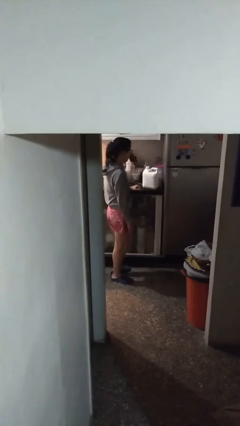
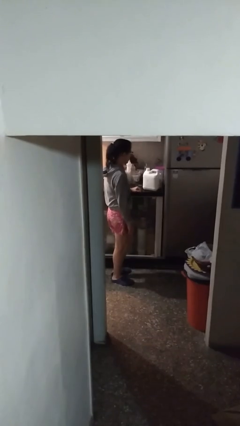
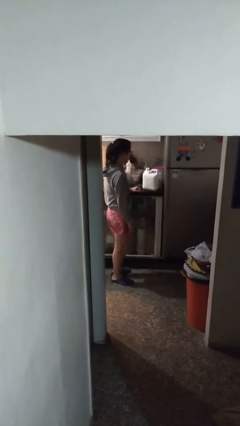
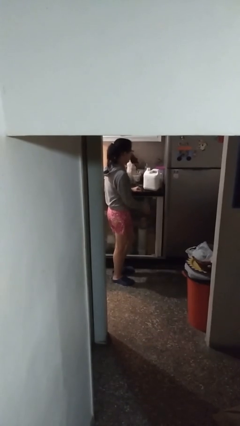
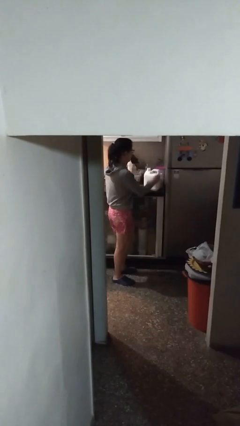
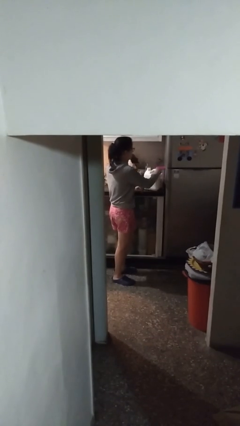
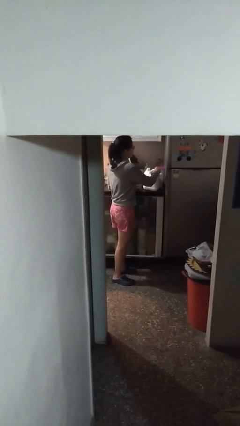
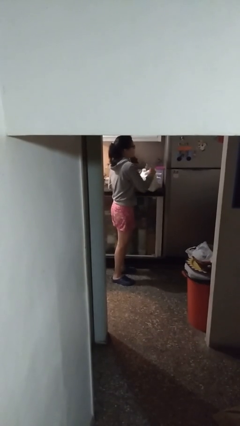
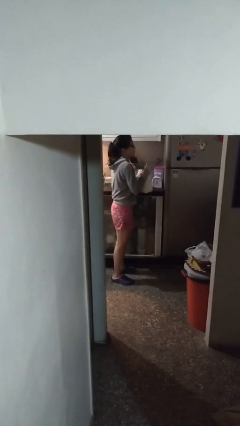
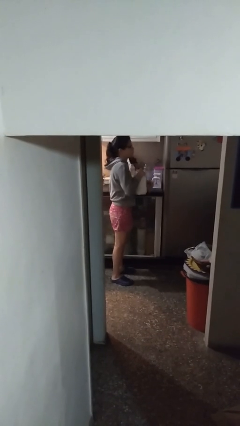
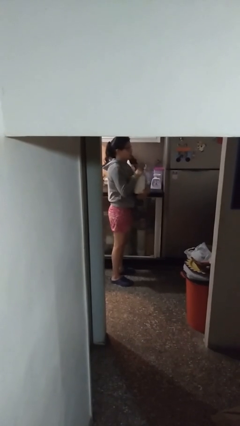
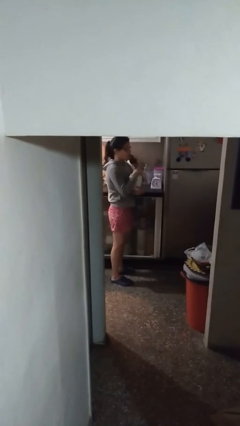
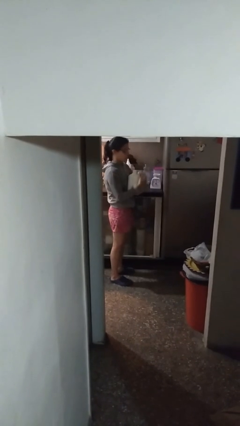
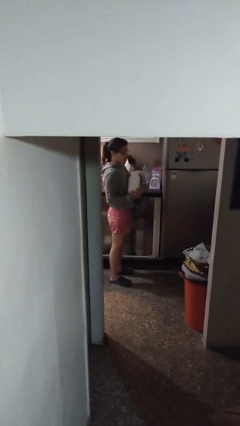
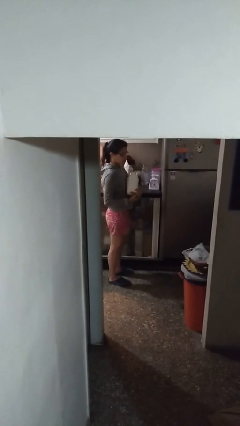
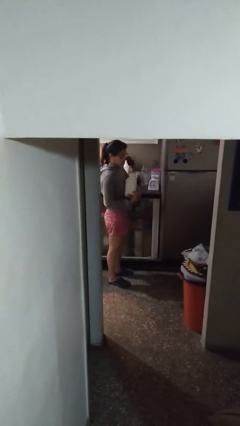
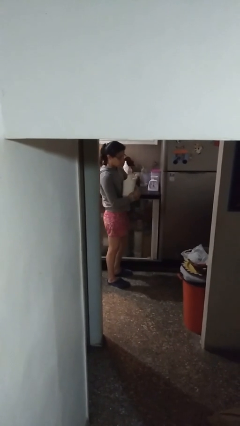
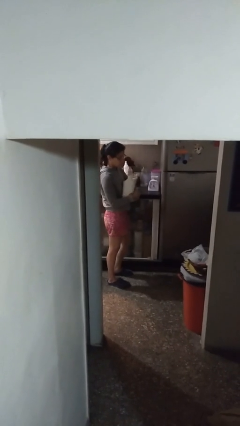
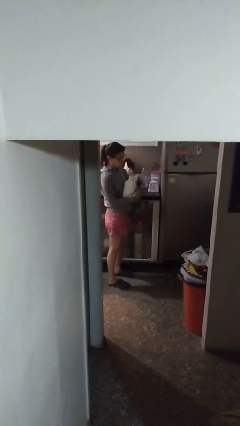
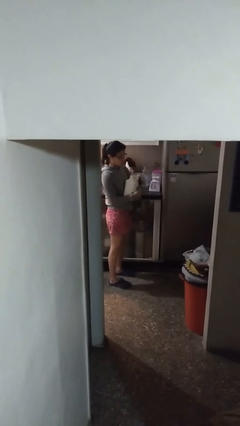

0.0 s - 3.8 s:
person picks up object from countertop

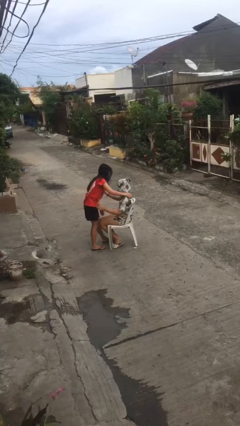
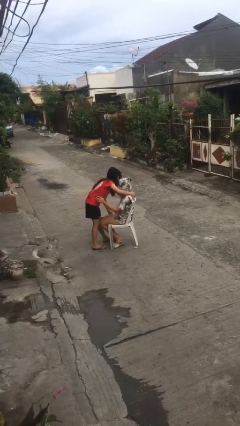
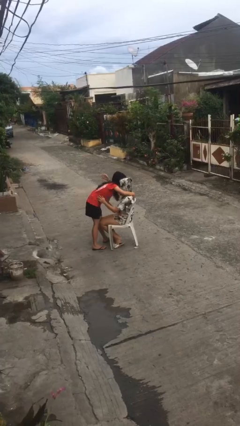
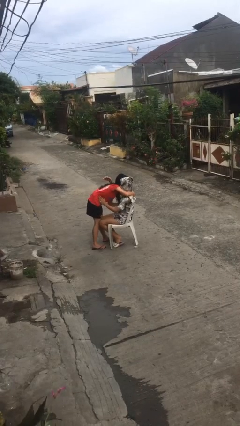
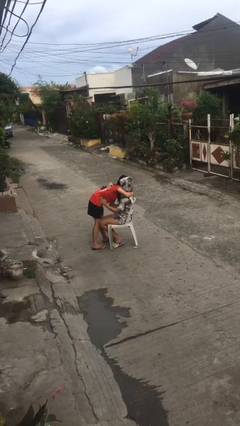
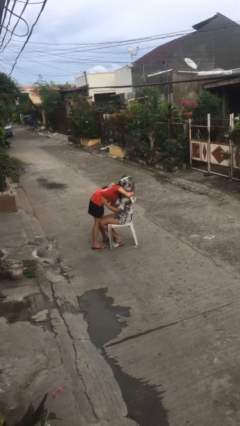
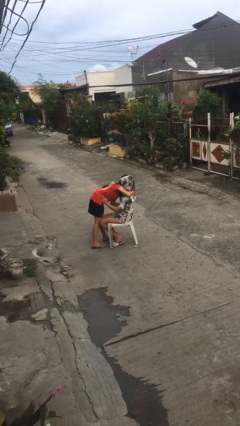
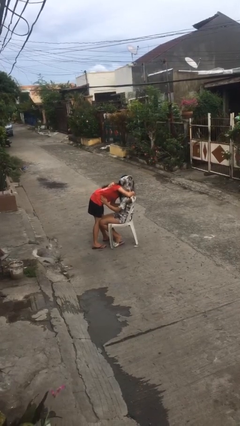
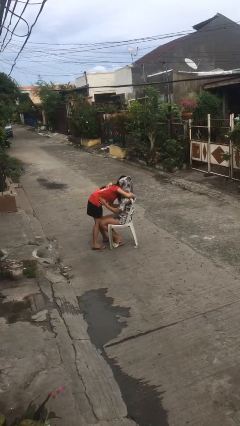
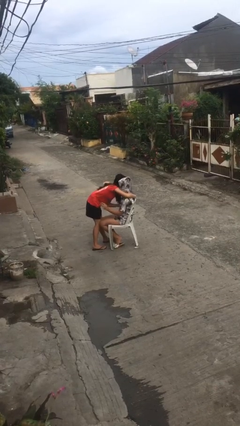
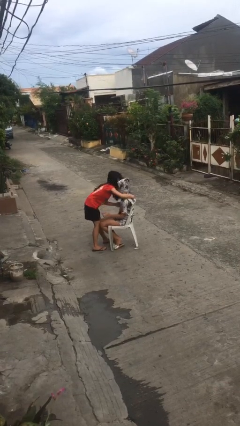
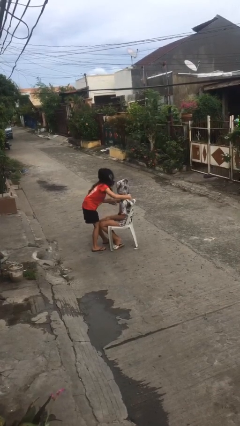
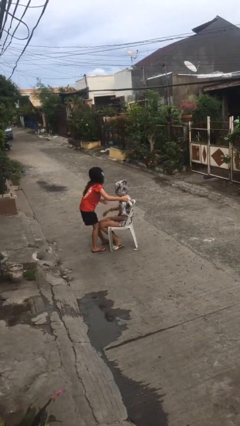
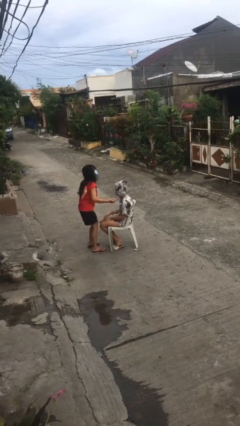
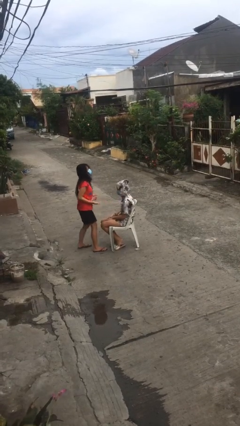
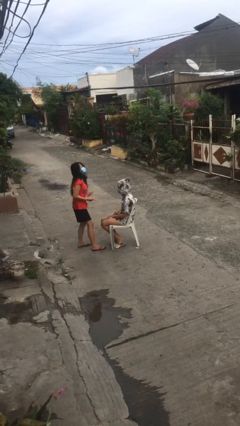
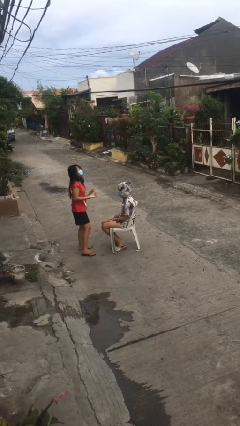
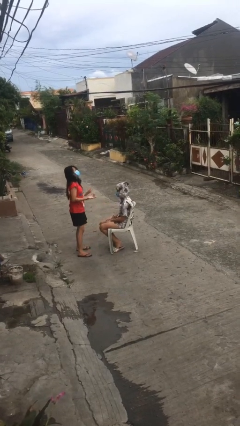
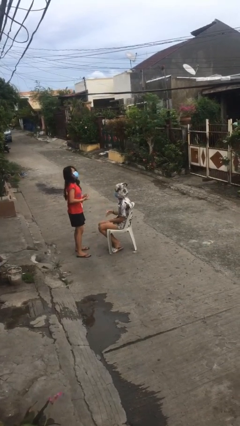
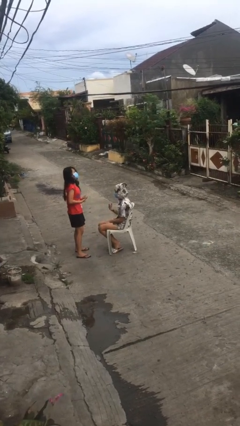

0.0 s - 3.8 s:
person embraces person

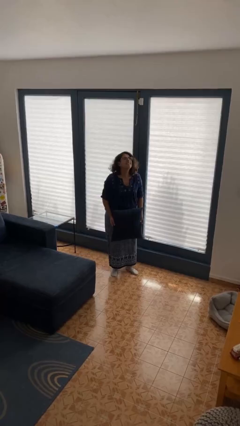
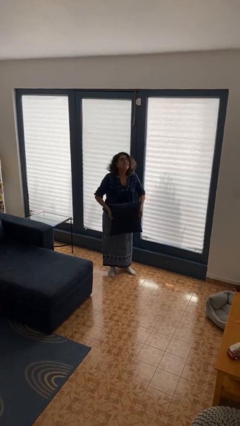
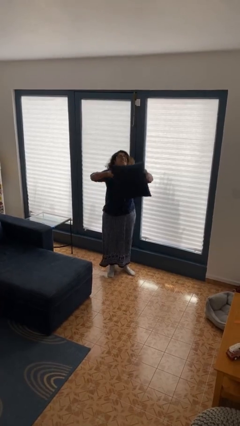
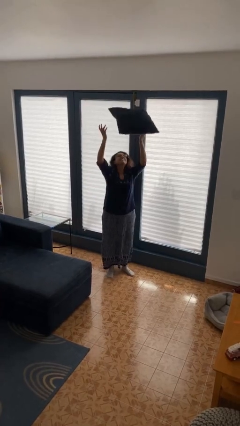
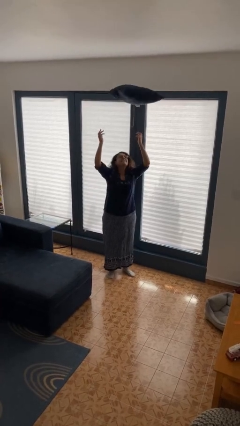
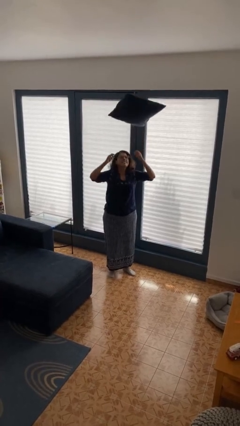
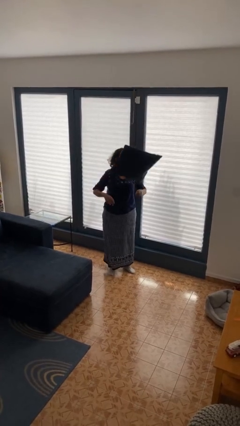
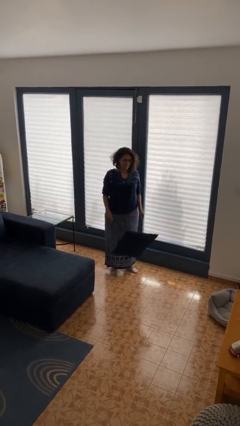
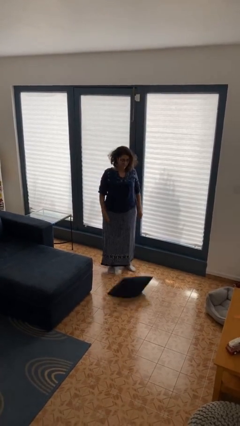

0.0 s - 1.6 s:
person throws object into air

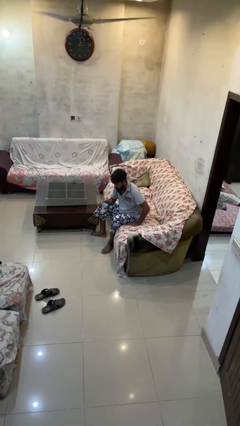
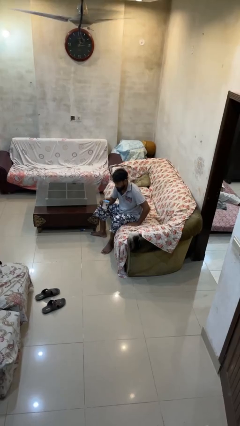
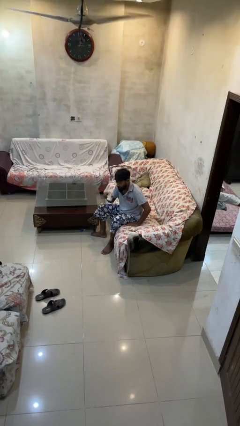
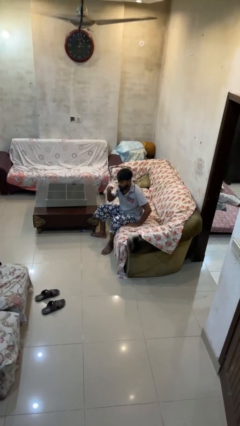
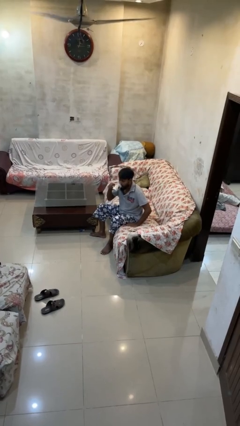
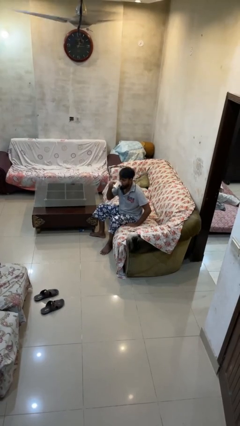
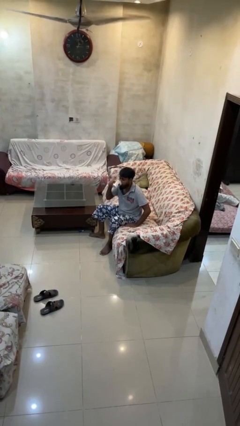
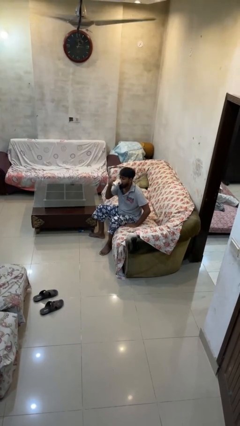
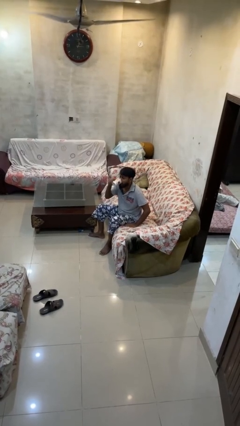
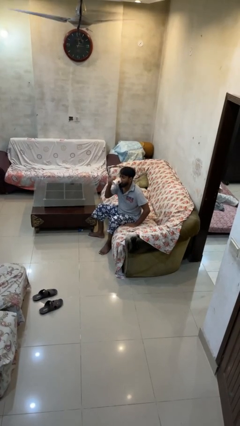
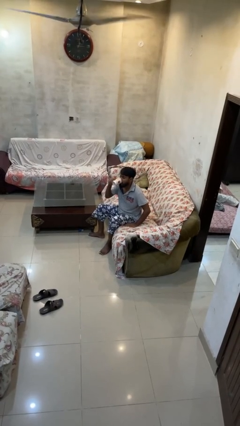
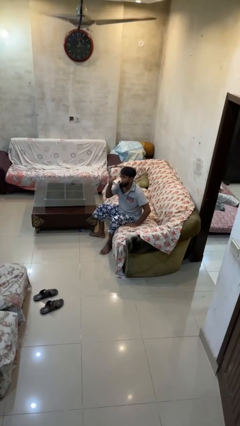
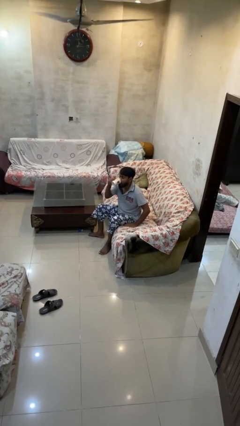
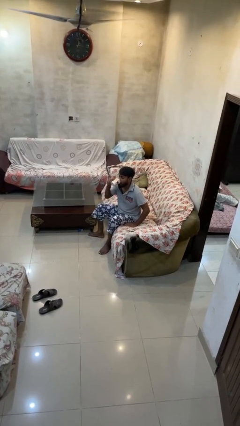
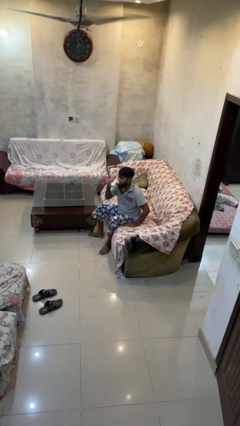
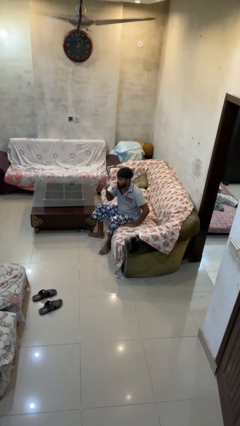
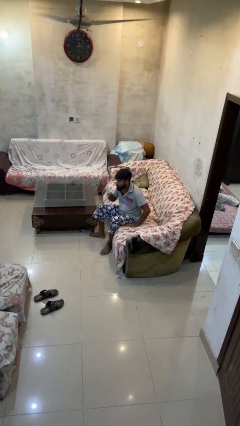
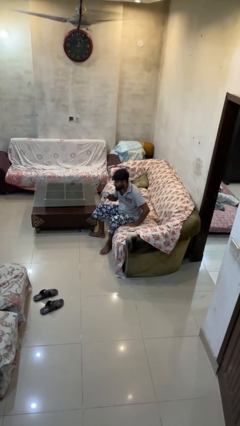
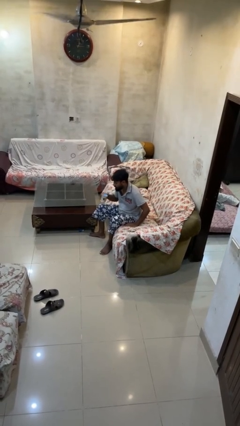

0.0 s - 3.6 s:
person drinks from mug

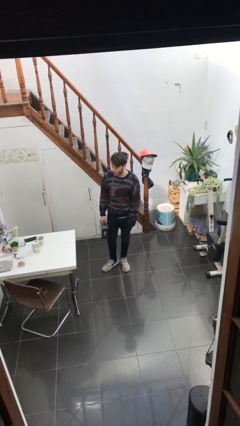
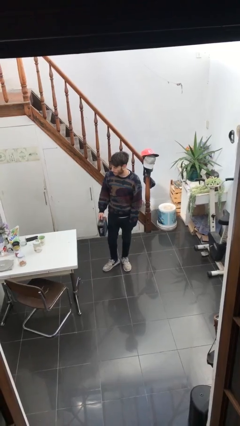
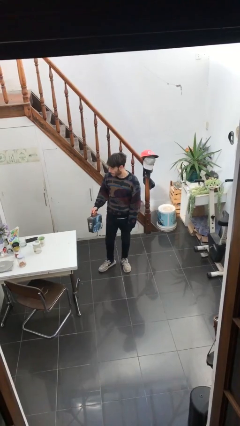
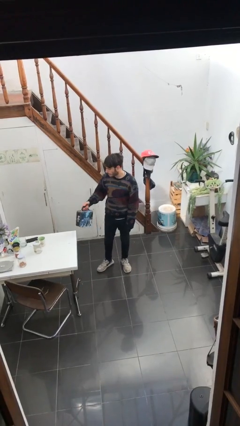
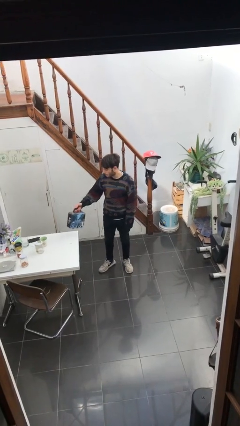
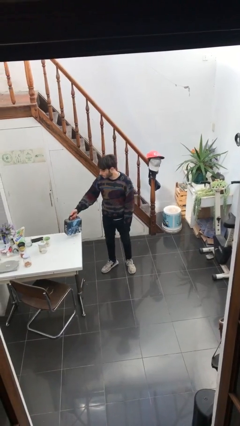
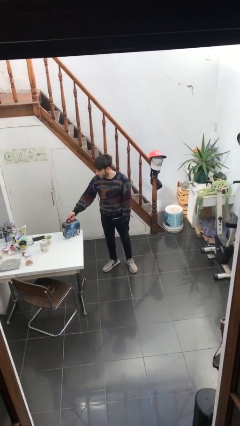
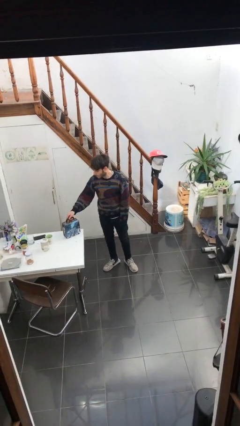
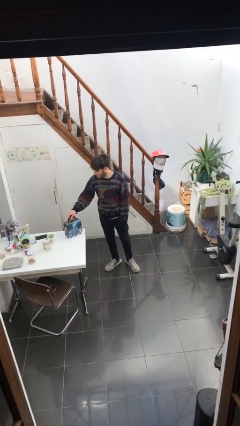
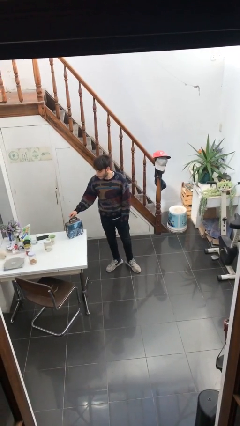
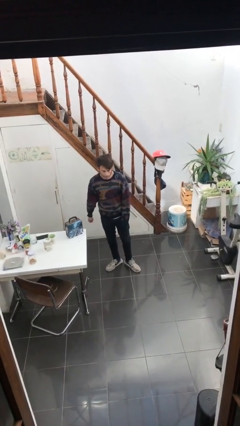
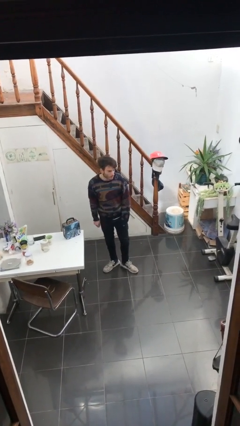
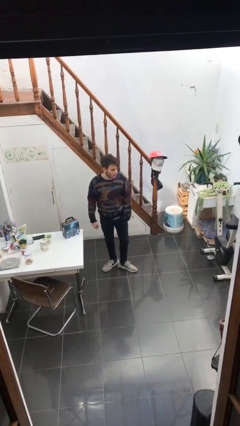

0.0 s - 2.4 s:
person puts down object on table

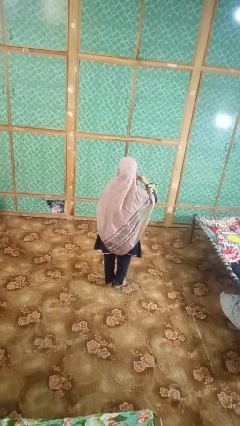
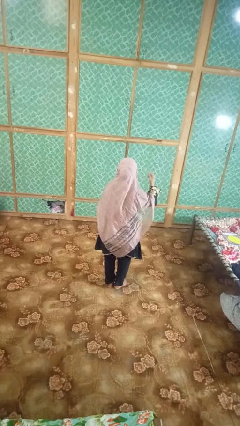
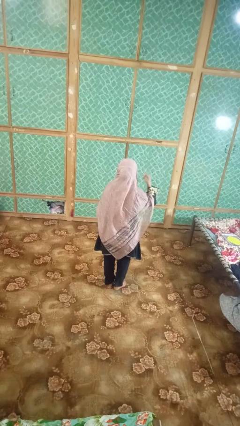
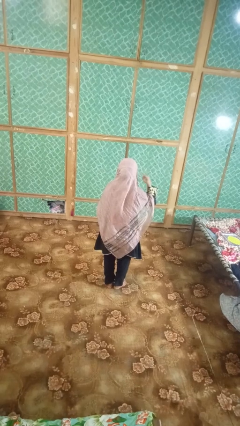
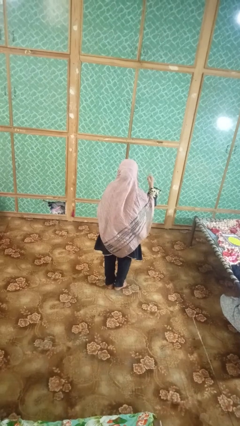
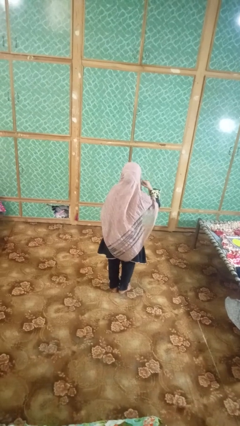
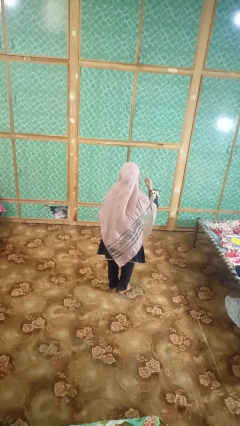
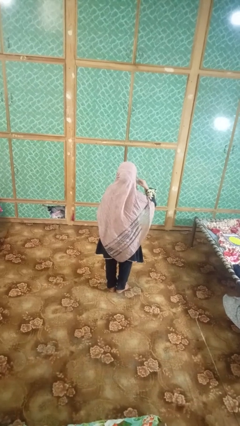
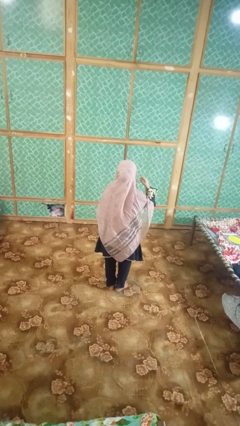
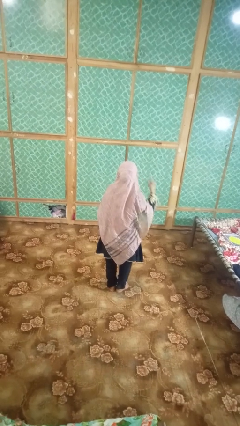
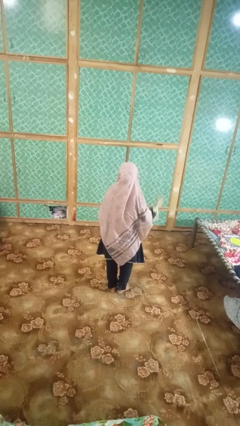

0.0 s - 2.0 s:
person gestures listen closely
